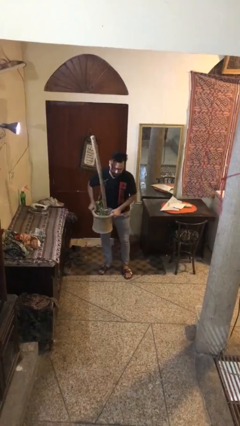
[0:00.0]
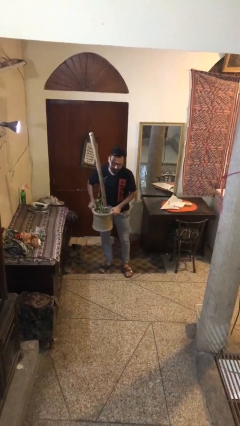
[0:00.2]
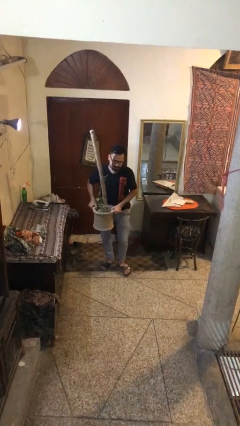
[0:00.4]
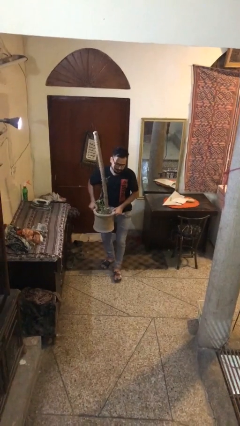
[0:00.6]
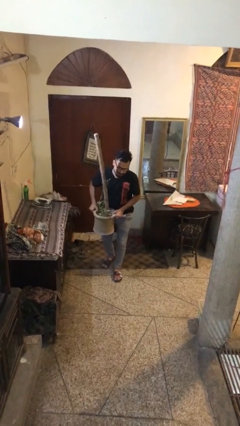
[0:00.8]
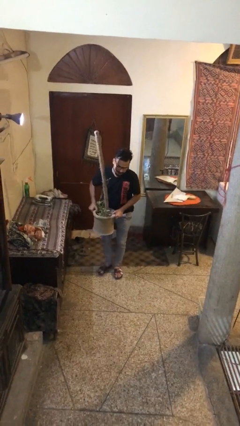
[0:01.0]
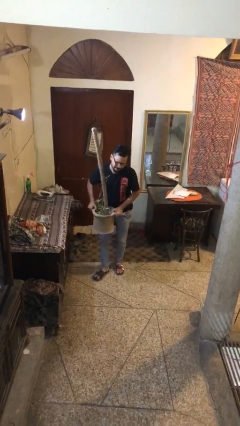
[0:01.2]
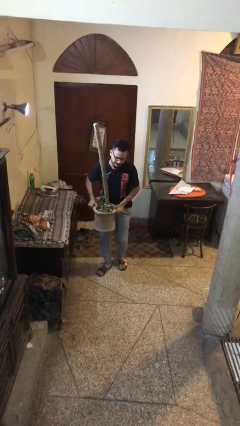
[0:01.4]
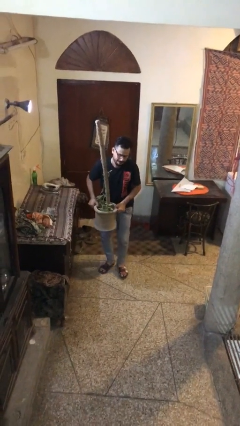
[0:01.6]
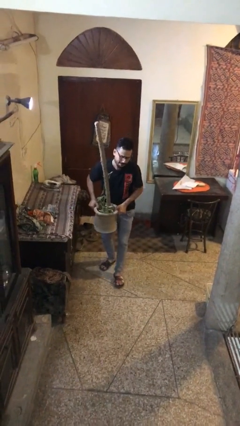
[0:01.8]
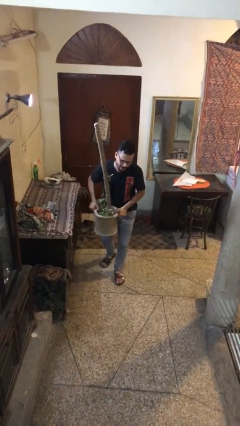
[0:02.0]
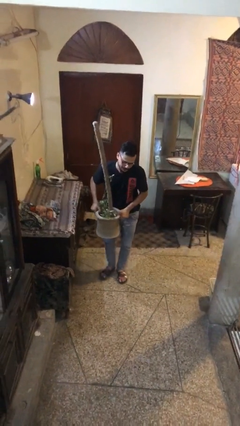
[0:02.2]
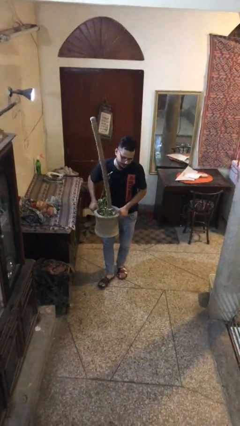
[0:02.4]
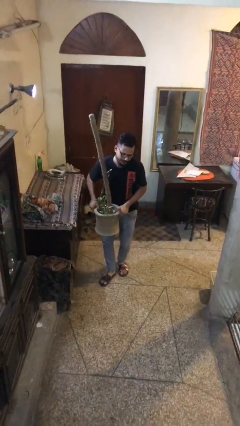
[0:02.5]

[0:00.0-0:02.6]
person carries heavy object

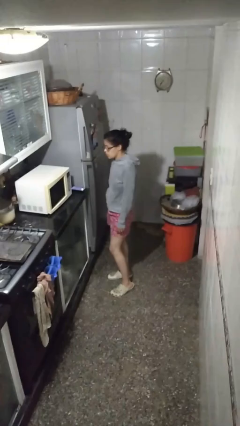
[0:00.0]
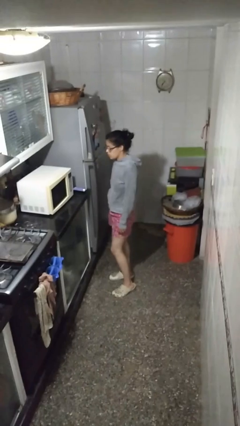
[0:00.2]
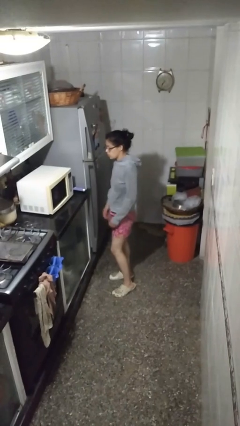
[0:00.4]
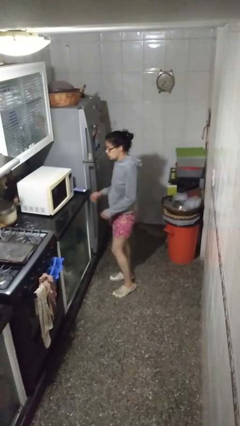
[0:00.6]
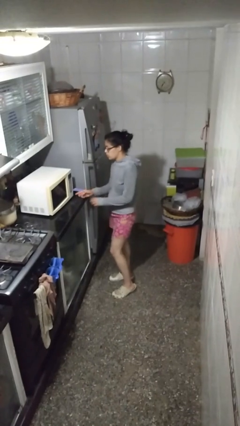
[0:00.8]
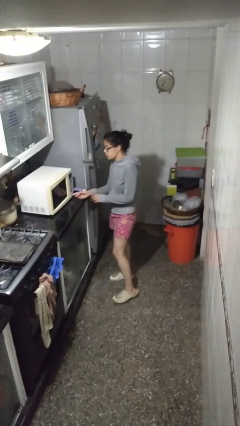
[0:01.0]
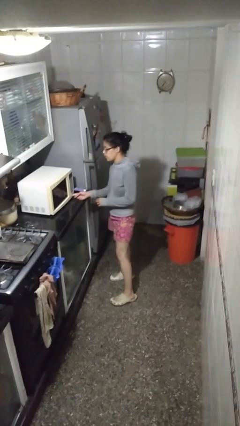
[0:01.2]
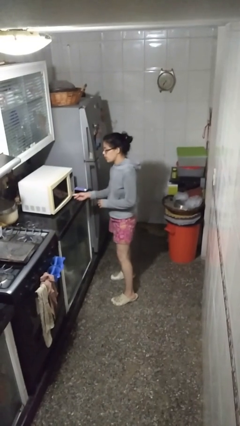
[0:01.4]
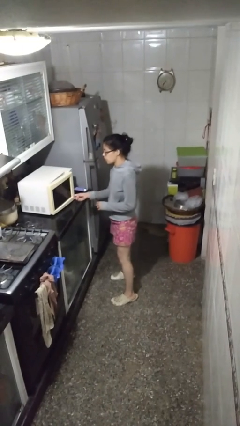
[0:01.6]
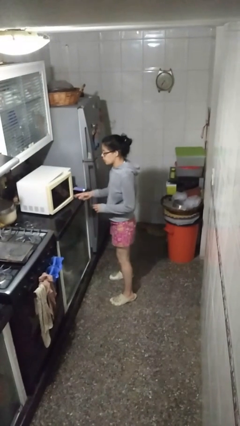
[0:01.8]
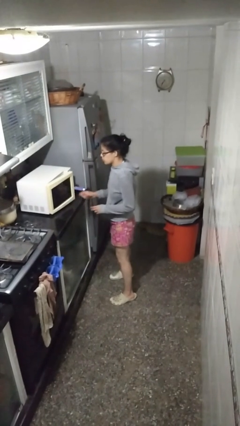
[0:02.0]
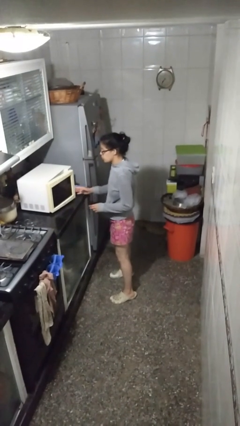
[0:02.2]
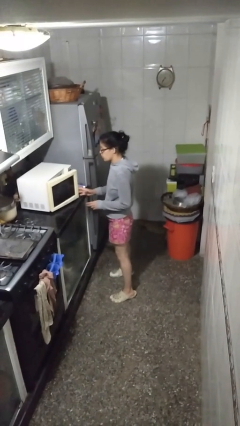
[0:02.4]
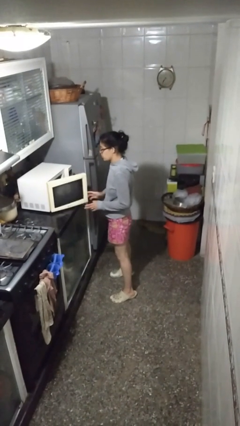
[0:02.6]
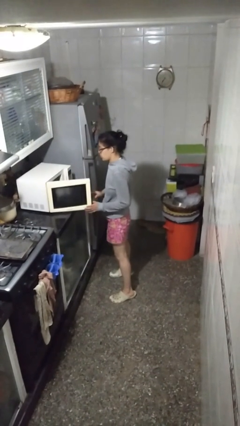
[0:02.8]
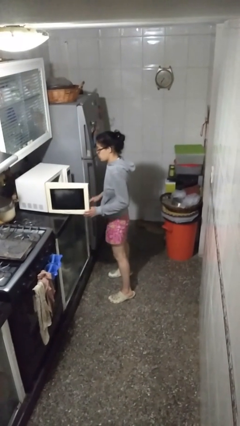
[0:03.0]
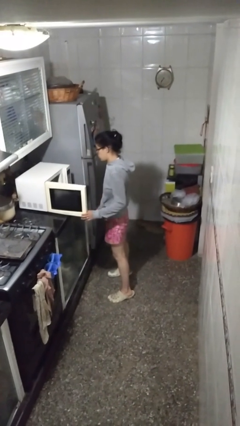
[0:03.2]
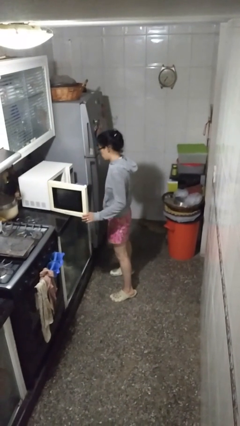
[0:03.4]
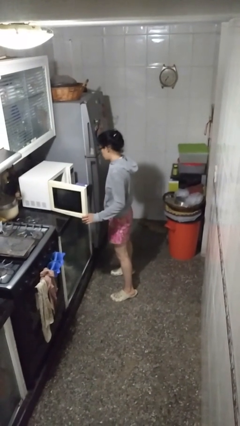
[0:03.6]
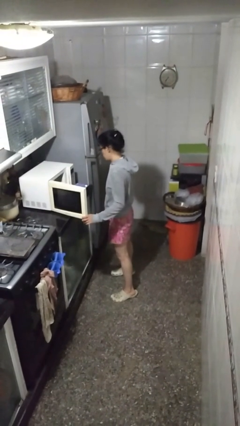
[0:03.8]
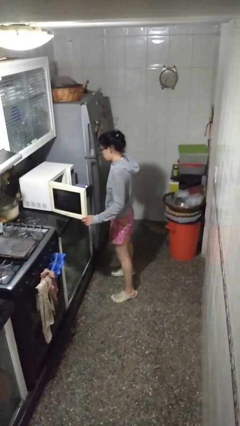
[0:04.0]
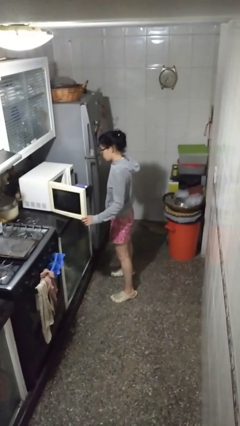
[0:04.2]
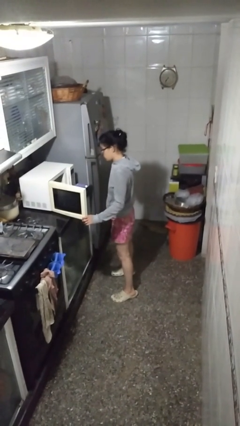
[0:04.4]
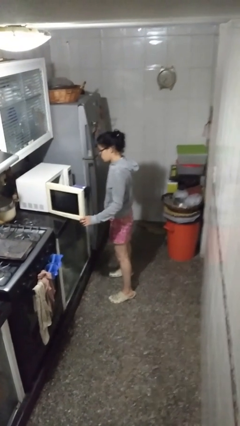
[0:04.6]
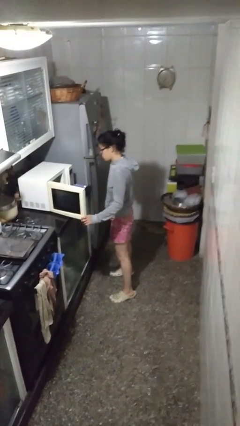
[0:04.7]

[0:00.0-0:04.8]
person opens microwave

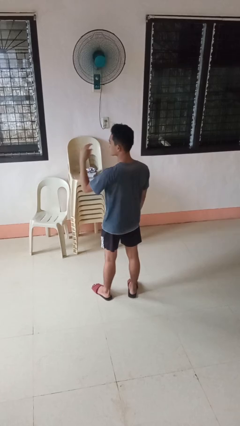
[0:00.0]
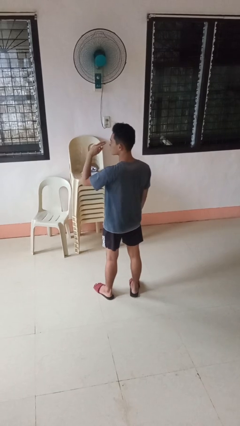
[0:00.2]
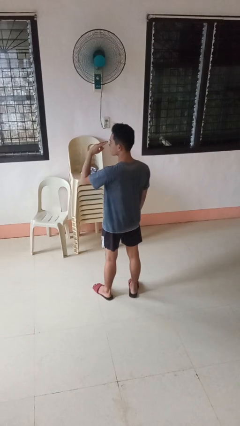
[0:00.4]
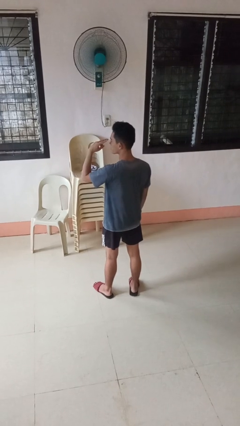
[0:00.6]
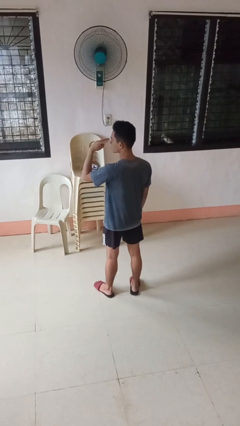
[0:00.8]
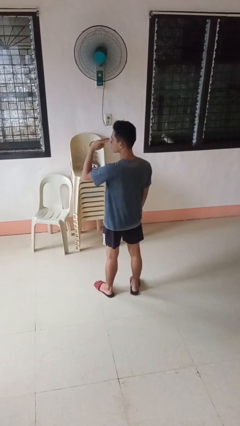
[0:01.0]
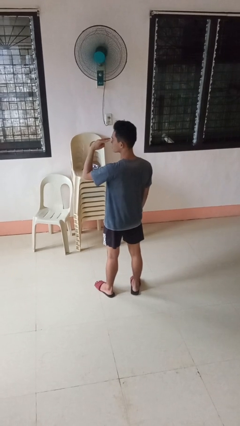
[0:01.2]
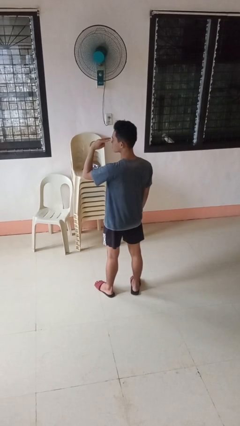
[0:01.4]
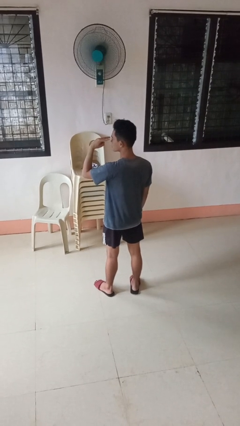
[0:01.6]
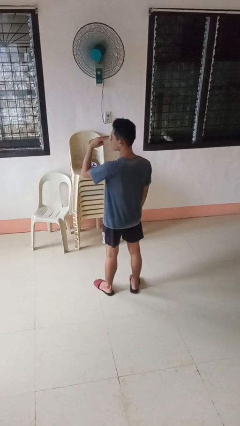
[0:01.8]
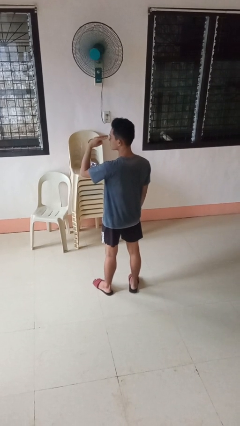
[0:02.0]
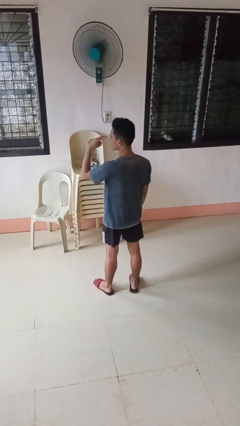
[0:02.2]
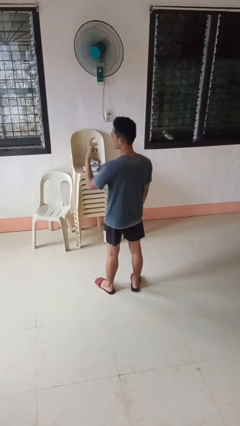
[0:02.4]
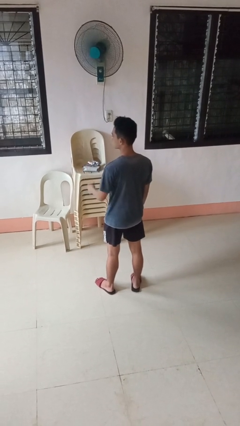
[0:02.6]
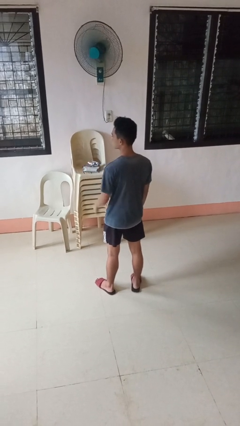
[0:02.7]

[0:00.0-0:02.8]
person gestures watch closely

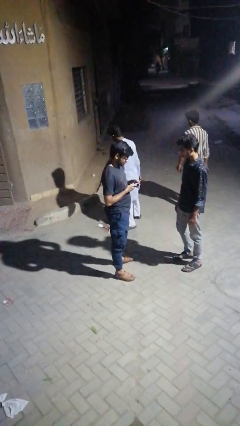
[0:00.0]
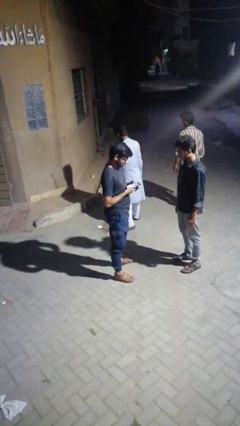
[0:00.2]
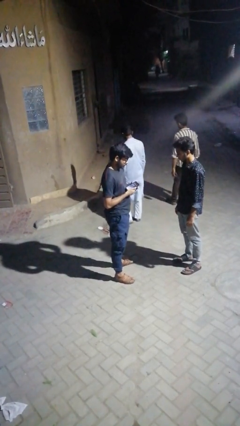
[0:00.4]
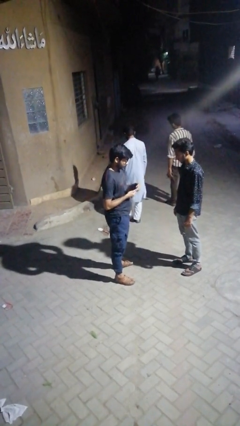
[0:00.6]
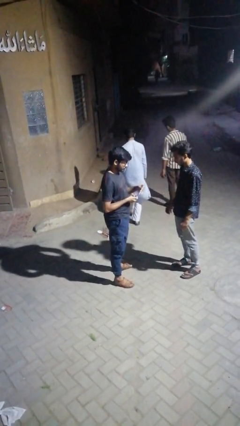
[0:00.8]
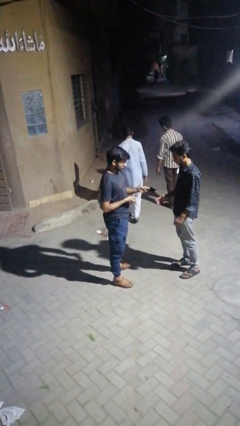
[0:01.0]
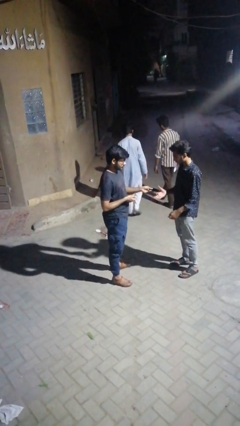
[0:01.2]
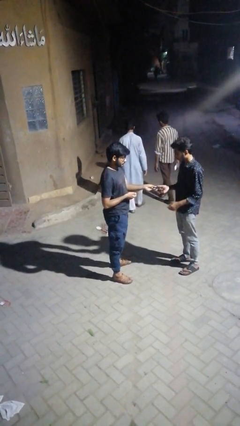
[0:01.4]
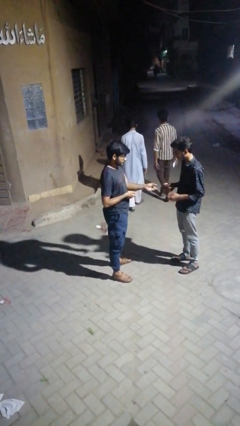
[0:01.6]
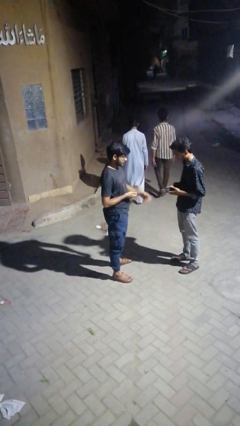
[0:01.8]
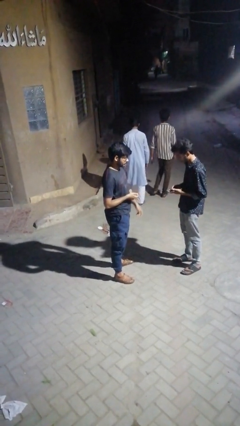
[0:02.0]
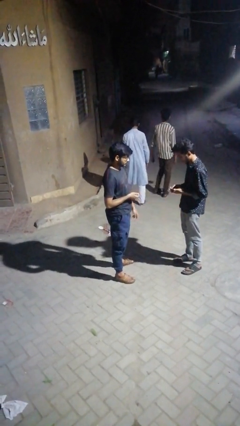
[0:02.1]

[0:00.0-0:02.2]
person transfers object to person

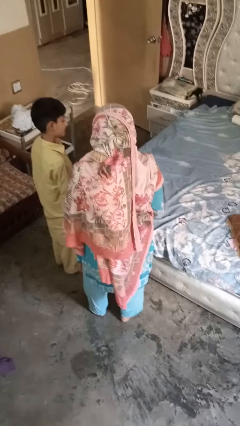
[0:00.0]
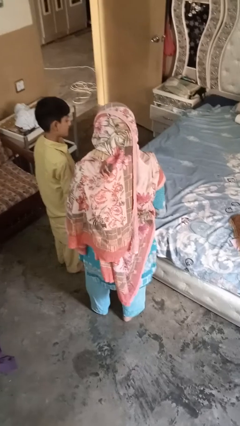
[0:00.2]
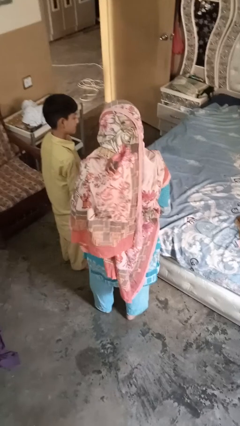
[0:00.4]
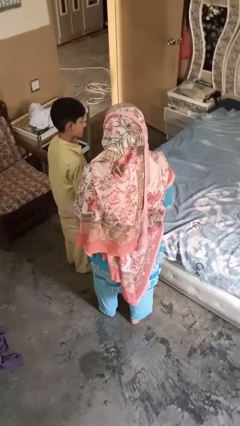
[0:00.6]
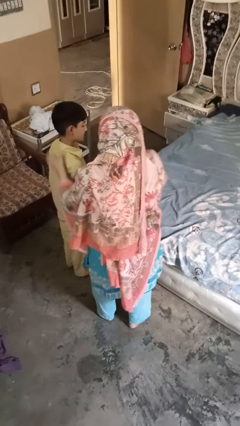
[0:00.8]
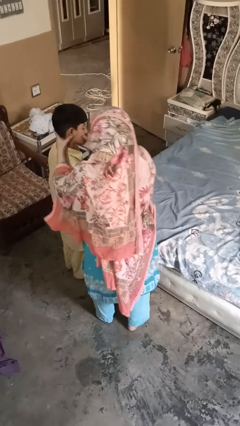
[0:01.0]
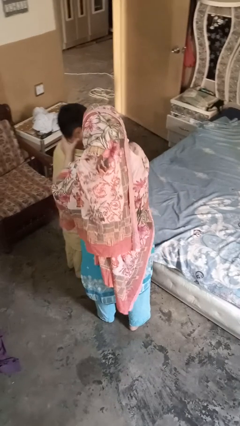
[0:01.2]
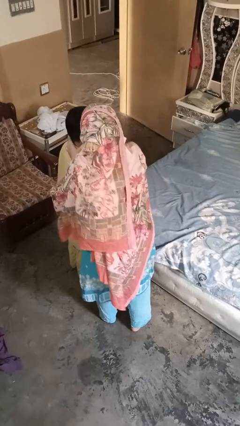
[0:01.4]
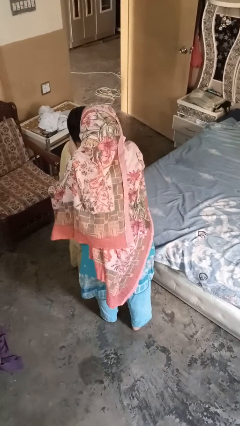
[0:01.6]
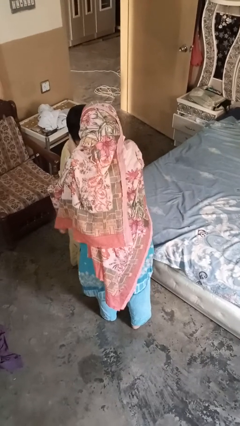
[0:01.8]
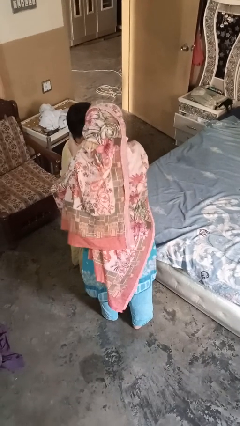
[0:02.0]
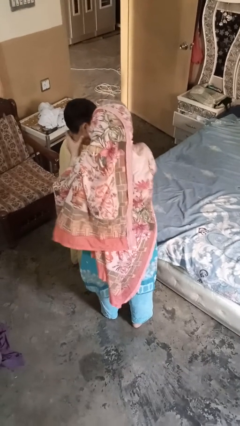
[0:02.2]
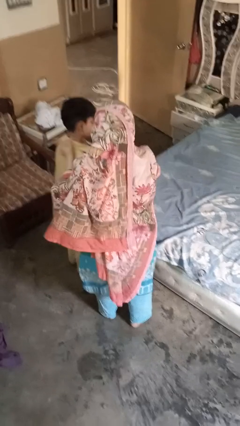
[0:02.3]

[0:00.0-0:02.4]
person gestures blow kiss

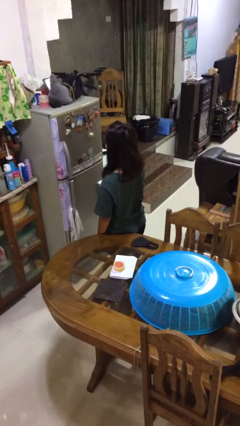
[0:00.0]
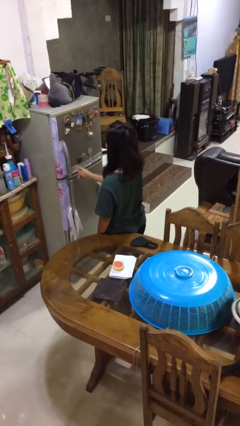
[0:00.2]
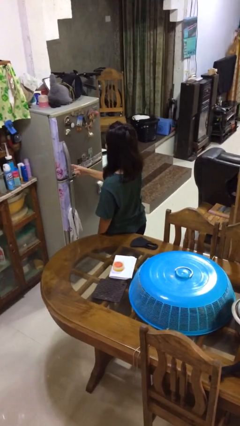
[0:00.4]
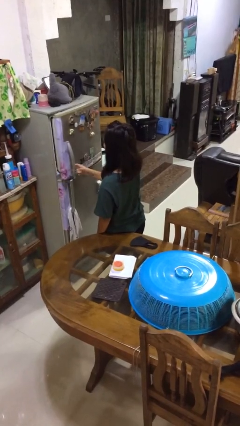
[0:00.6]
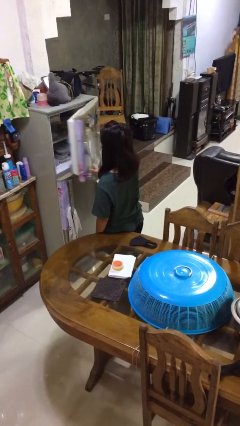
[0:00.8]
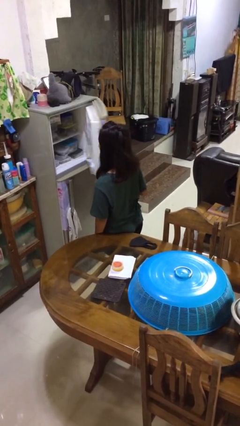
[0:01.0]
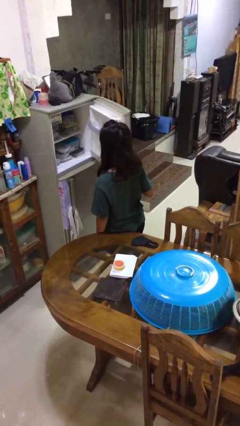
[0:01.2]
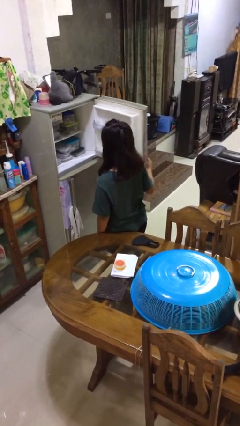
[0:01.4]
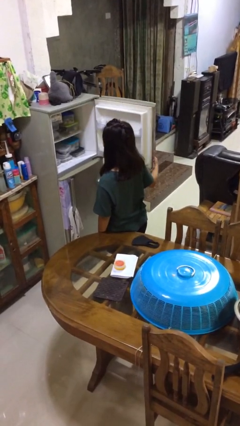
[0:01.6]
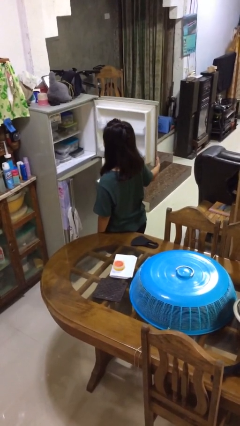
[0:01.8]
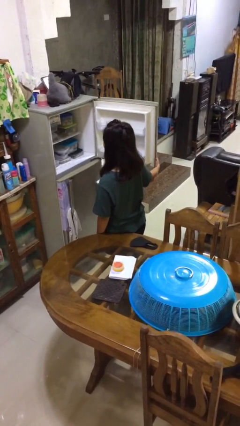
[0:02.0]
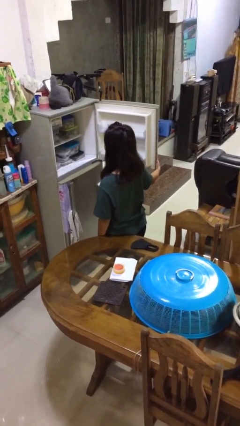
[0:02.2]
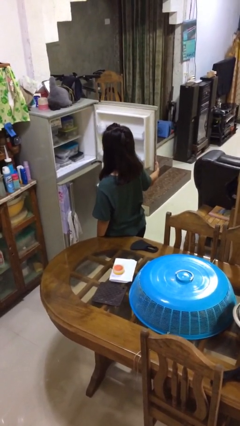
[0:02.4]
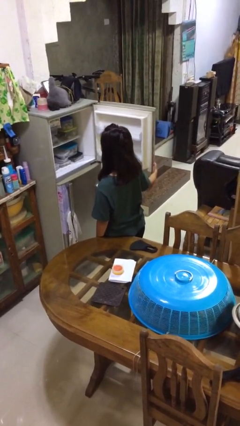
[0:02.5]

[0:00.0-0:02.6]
person opens refrigerator
